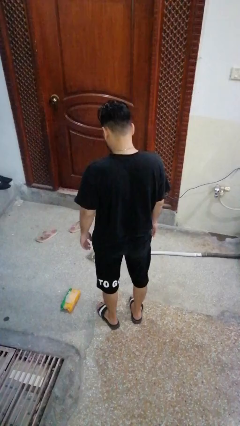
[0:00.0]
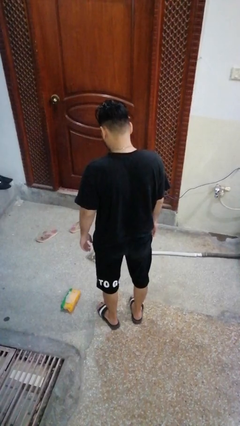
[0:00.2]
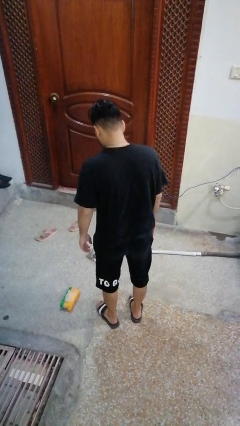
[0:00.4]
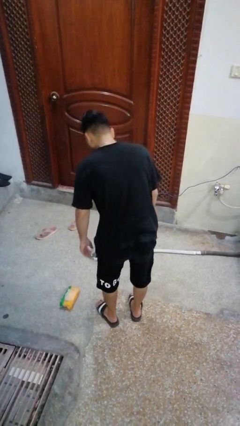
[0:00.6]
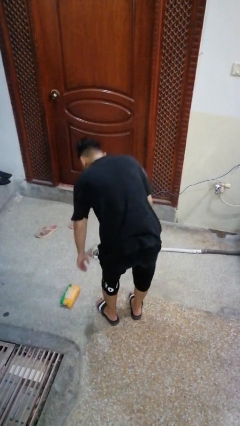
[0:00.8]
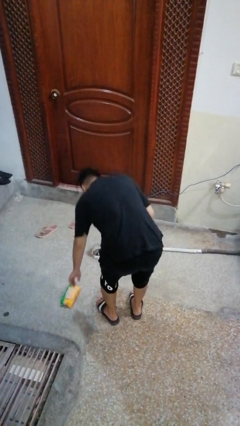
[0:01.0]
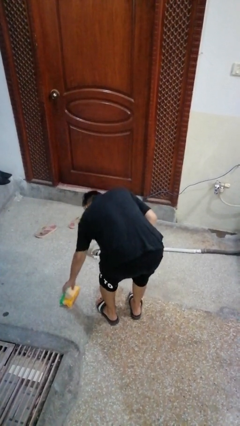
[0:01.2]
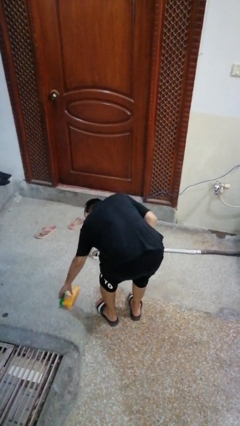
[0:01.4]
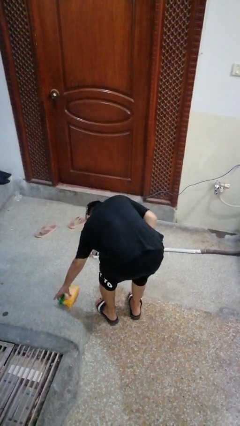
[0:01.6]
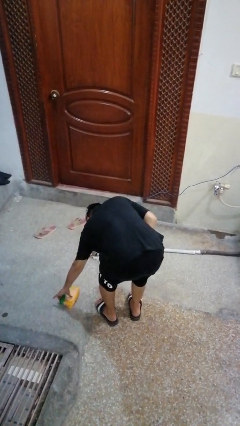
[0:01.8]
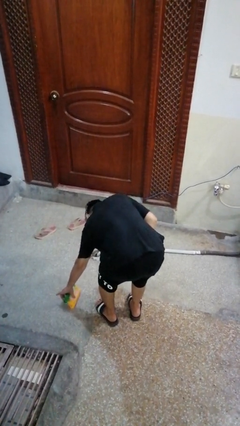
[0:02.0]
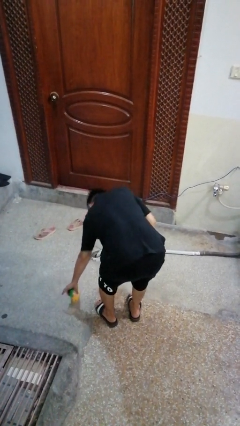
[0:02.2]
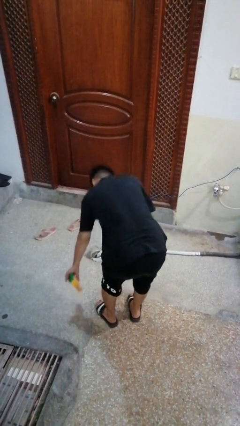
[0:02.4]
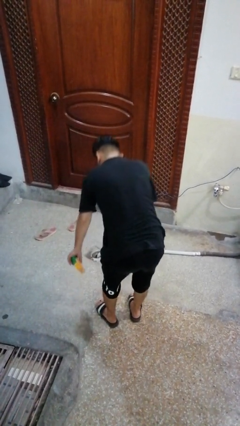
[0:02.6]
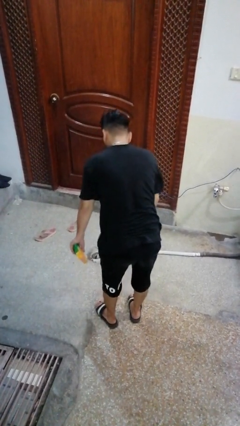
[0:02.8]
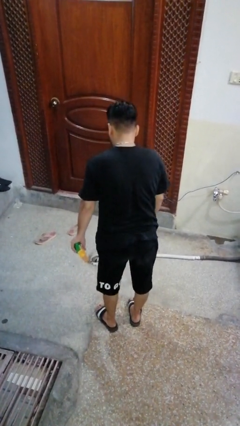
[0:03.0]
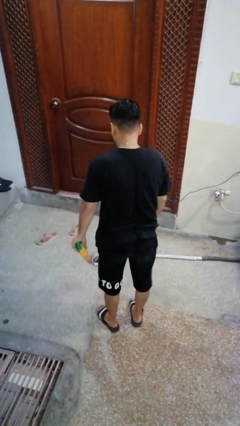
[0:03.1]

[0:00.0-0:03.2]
person picks up object from floor

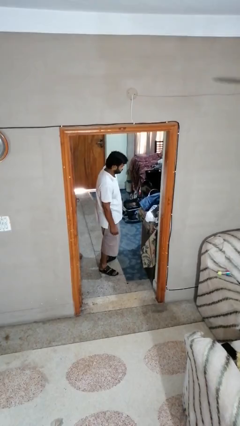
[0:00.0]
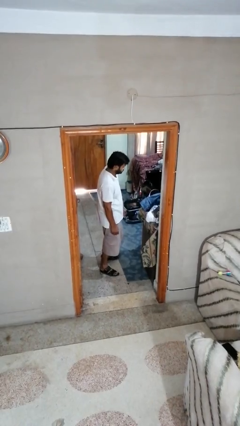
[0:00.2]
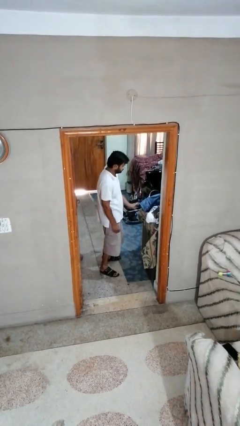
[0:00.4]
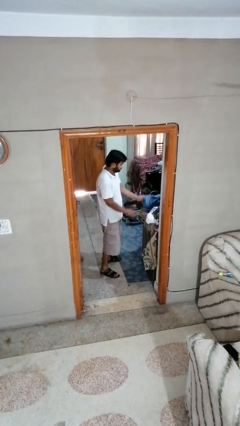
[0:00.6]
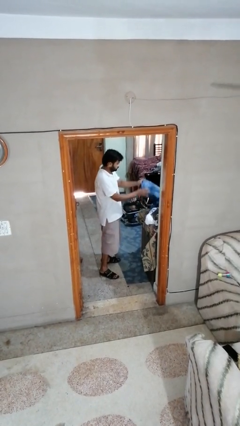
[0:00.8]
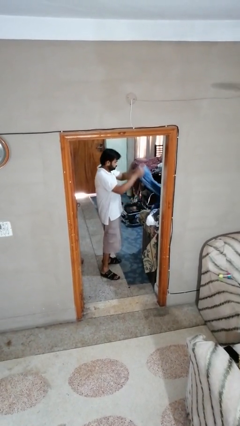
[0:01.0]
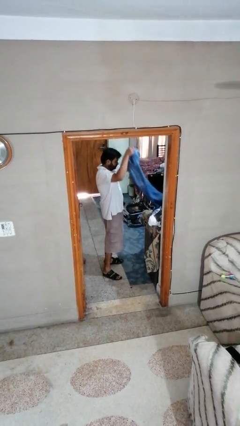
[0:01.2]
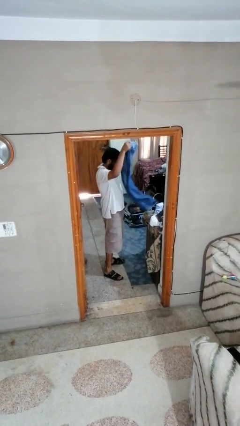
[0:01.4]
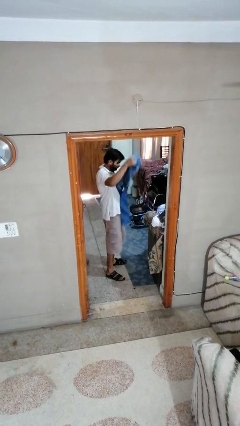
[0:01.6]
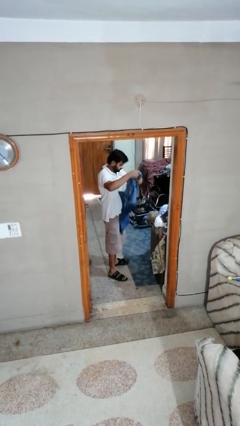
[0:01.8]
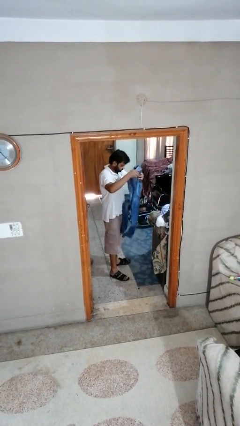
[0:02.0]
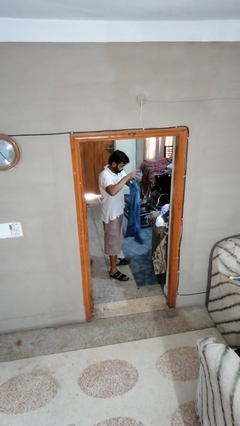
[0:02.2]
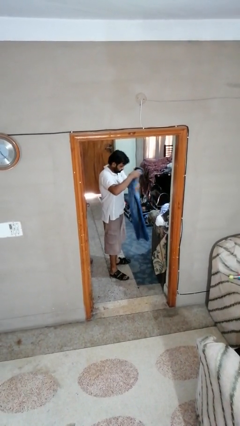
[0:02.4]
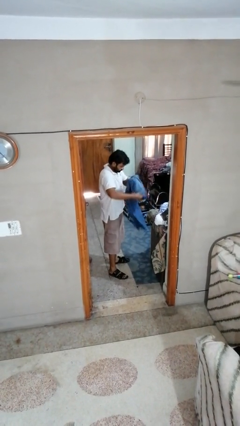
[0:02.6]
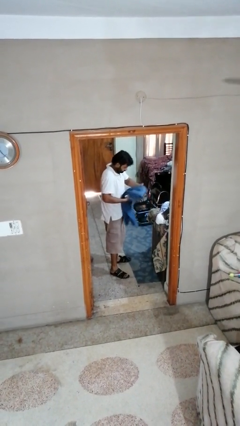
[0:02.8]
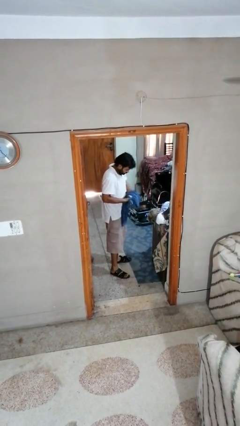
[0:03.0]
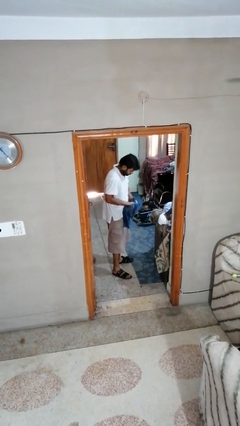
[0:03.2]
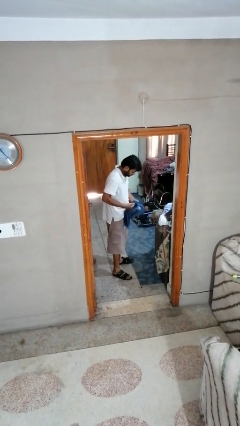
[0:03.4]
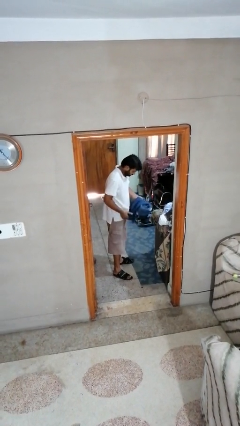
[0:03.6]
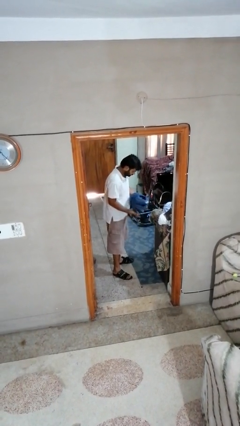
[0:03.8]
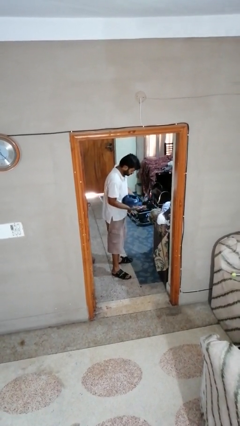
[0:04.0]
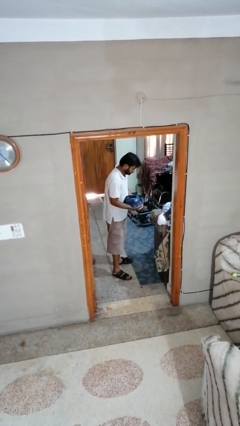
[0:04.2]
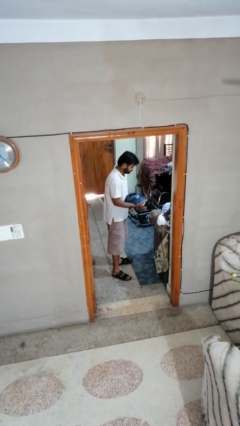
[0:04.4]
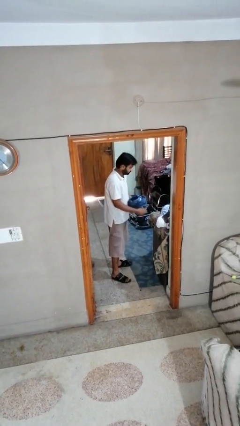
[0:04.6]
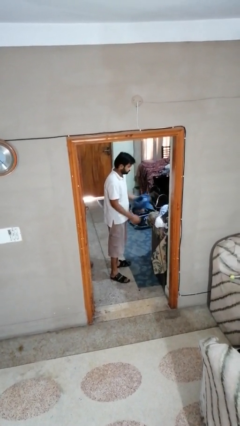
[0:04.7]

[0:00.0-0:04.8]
person folds pants

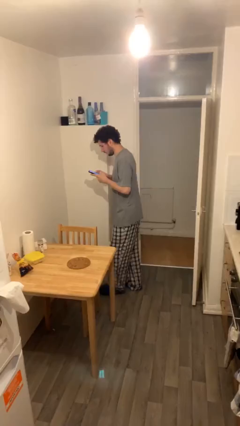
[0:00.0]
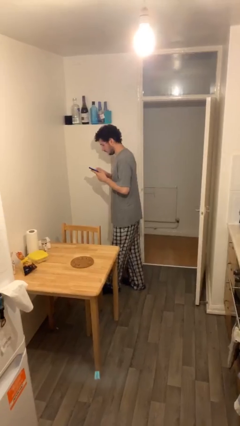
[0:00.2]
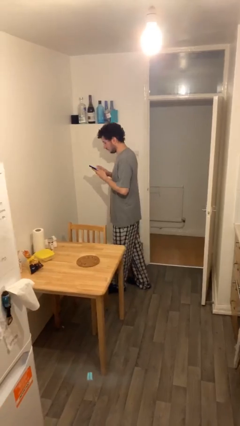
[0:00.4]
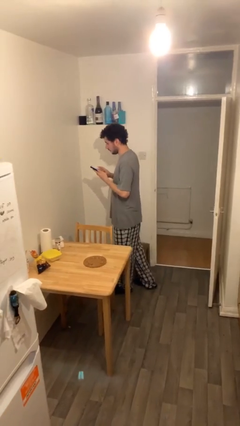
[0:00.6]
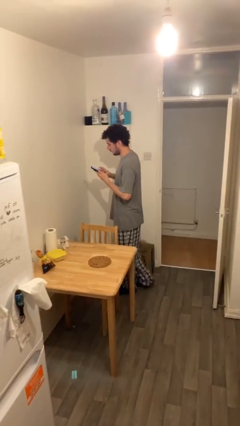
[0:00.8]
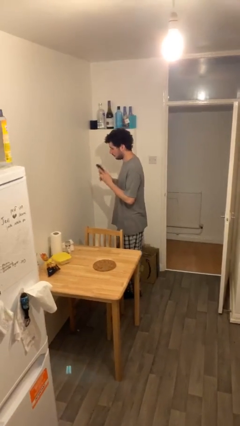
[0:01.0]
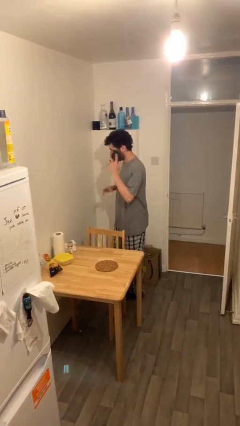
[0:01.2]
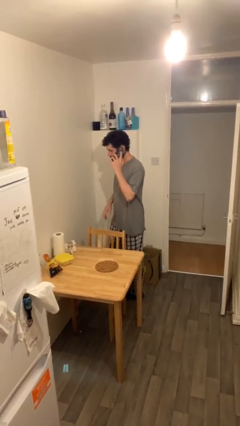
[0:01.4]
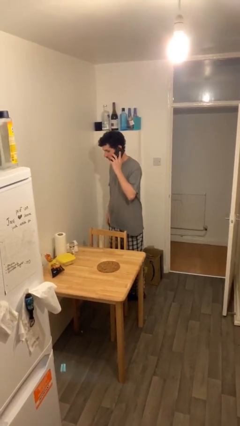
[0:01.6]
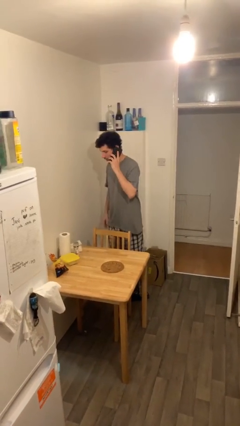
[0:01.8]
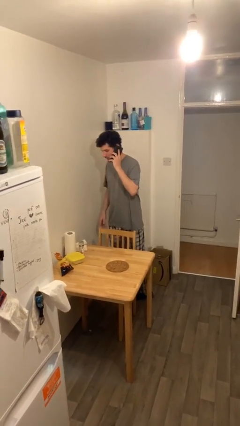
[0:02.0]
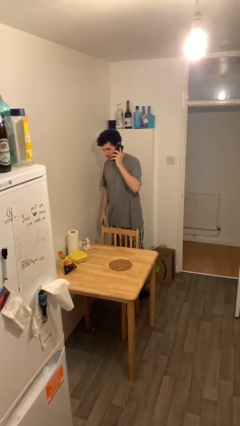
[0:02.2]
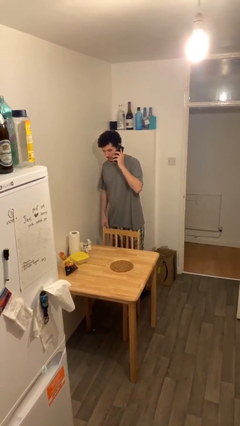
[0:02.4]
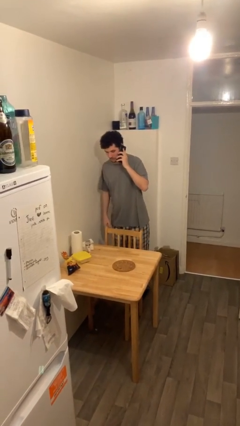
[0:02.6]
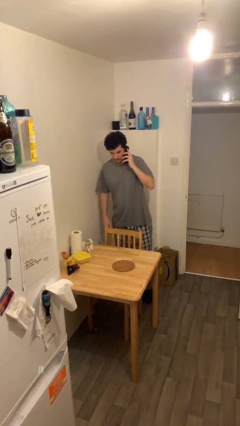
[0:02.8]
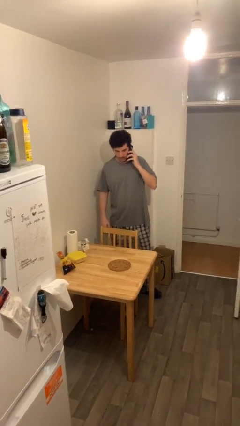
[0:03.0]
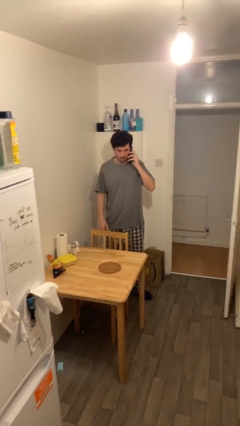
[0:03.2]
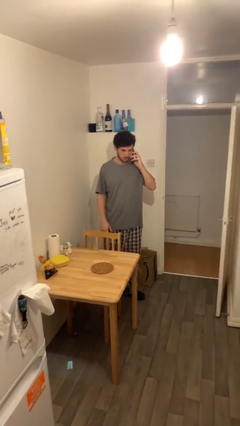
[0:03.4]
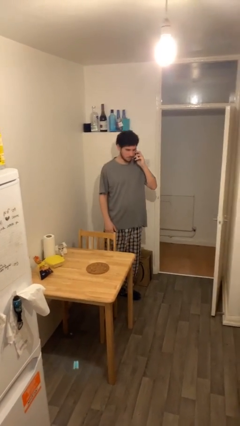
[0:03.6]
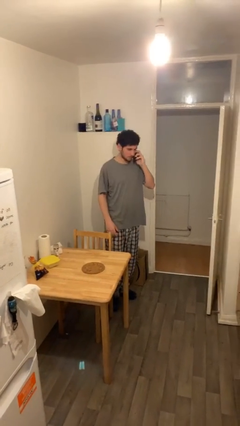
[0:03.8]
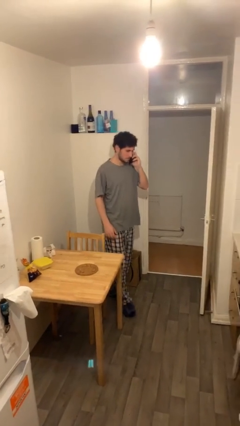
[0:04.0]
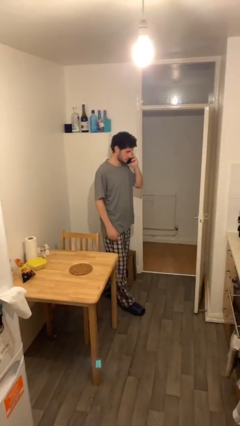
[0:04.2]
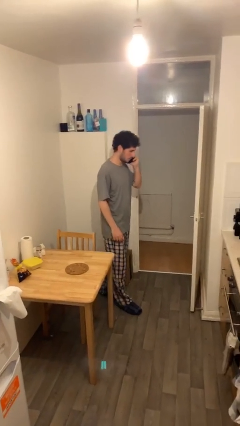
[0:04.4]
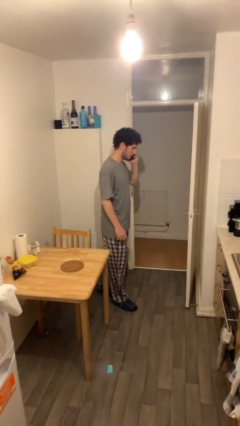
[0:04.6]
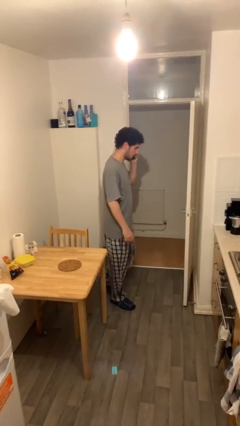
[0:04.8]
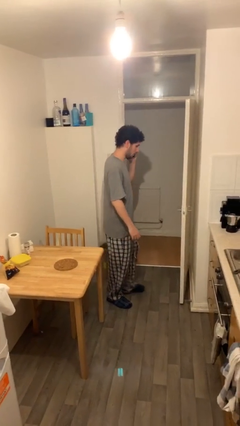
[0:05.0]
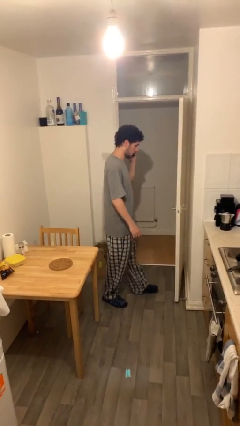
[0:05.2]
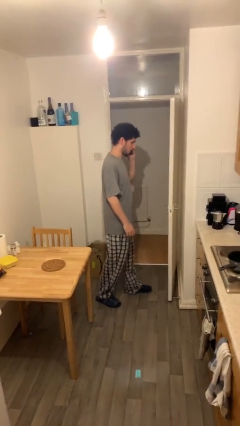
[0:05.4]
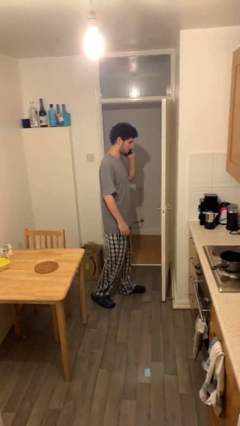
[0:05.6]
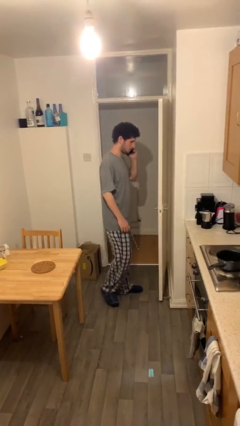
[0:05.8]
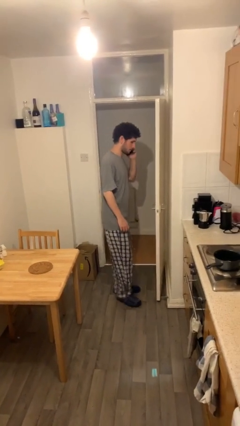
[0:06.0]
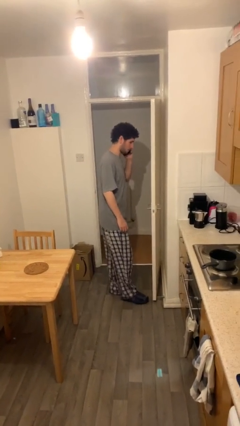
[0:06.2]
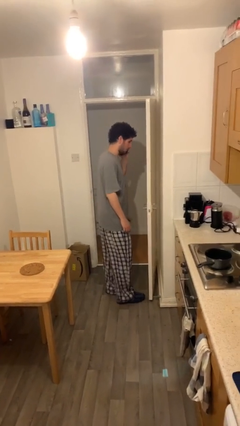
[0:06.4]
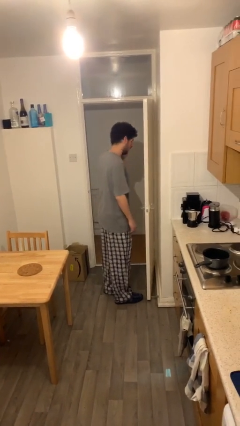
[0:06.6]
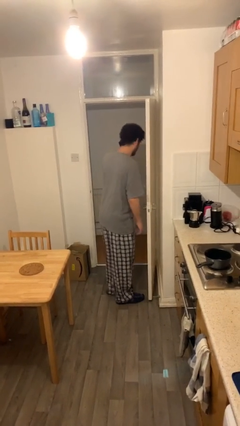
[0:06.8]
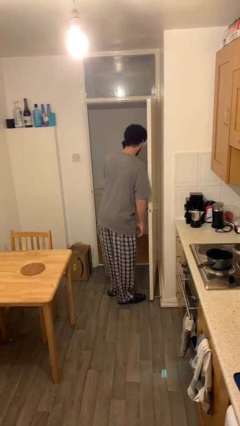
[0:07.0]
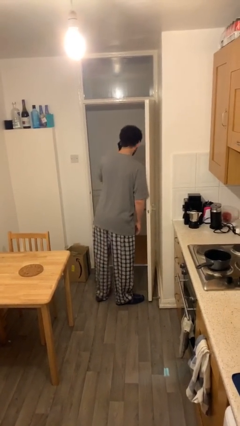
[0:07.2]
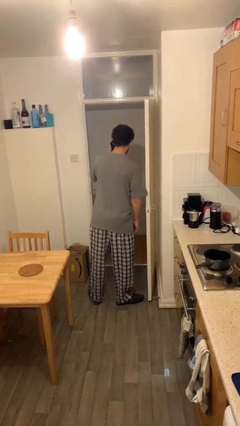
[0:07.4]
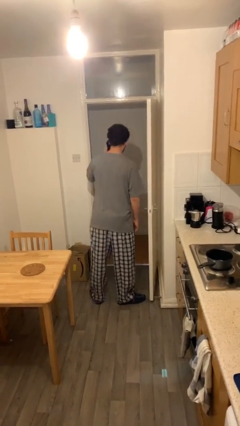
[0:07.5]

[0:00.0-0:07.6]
person talks on phone

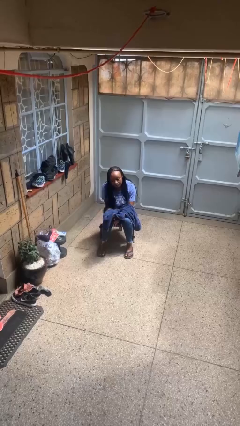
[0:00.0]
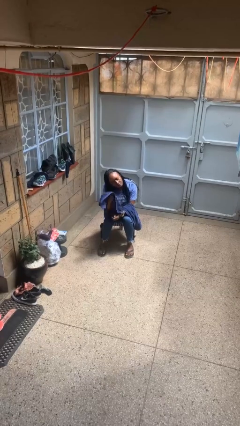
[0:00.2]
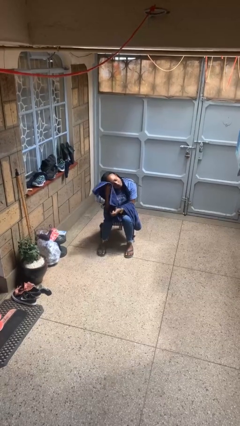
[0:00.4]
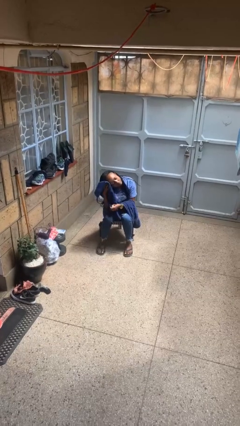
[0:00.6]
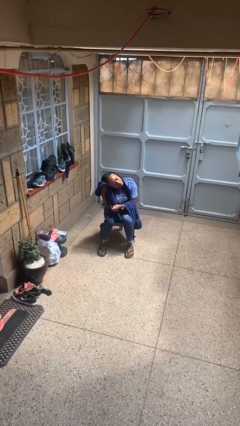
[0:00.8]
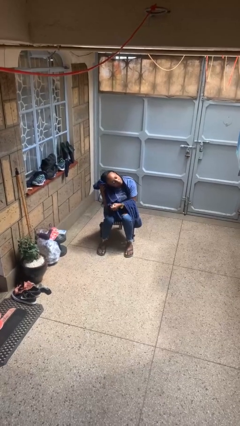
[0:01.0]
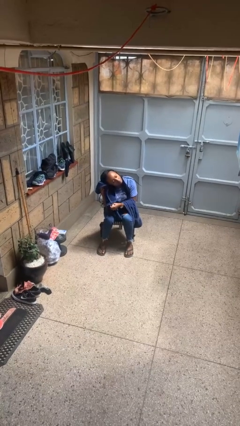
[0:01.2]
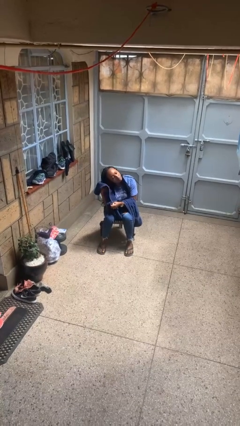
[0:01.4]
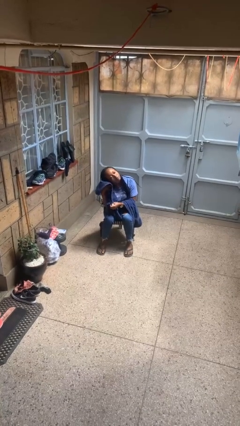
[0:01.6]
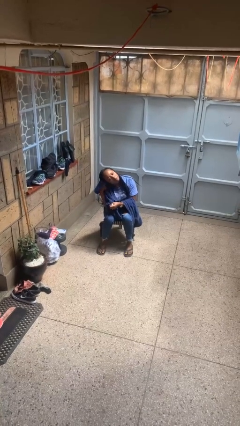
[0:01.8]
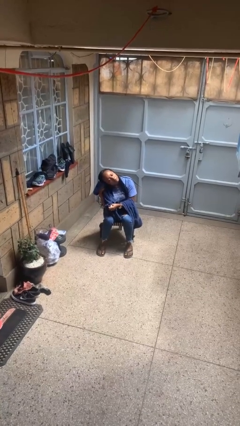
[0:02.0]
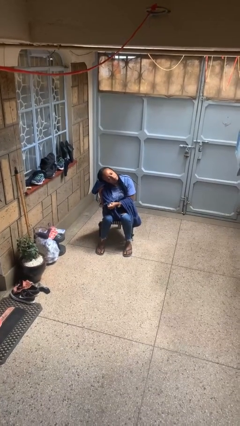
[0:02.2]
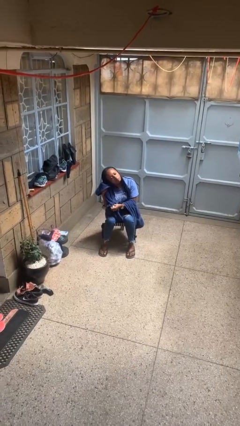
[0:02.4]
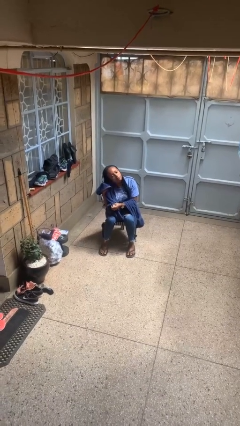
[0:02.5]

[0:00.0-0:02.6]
person dries hair with towel
